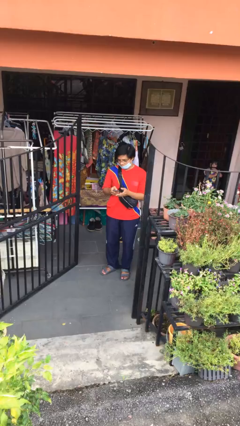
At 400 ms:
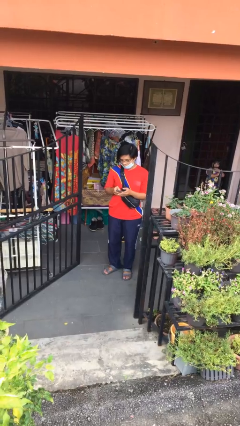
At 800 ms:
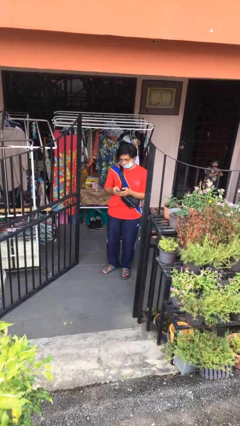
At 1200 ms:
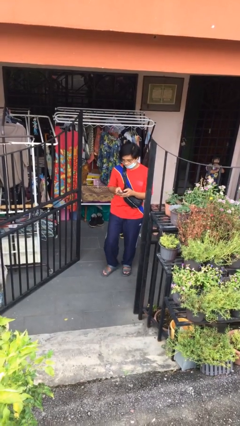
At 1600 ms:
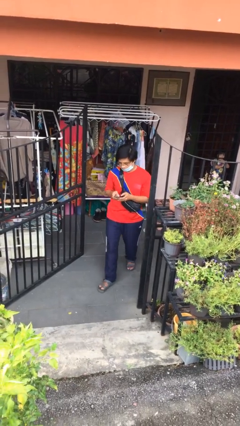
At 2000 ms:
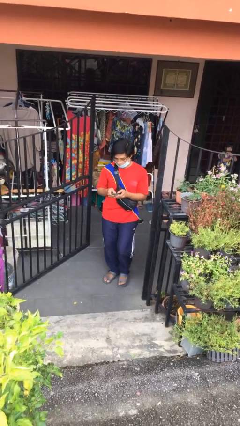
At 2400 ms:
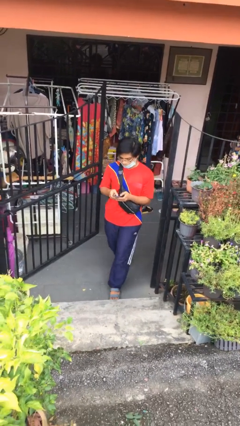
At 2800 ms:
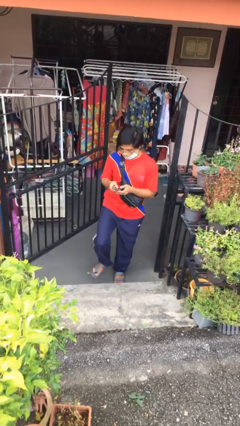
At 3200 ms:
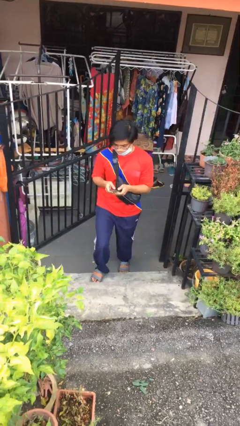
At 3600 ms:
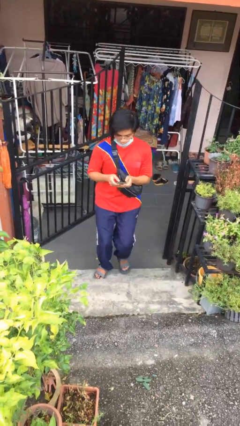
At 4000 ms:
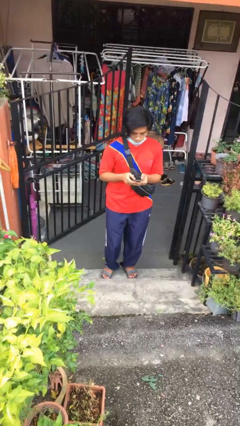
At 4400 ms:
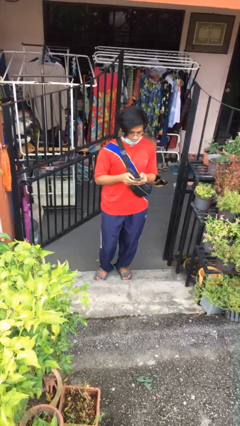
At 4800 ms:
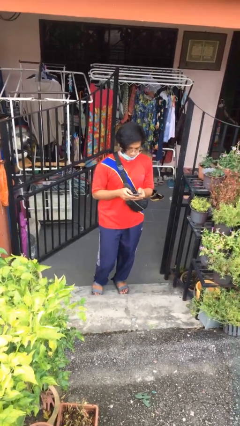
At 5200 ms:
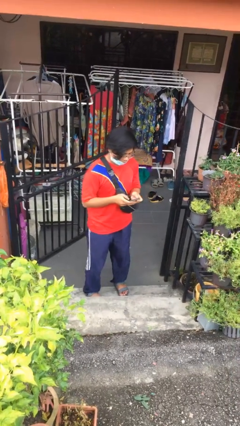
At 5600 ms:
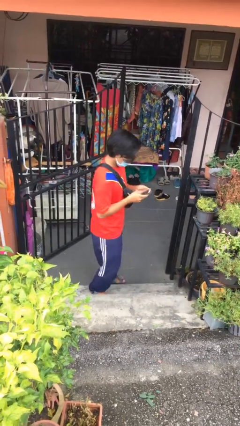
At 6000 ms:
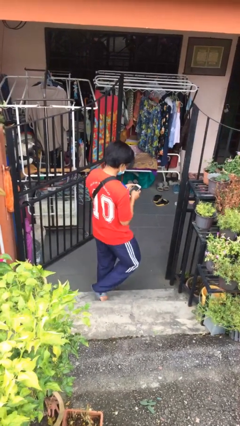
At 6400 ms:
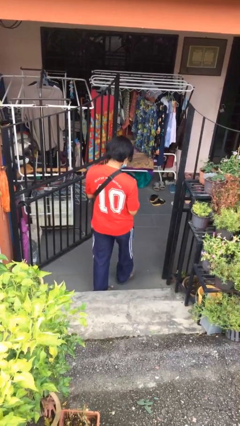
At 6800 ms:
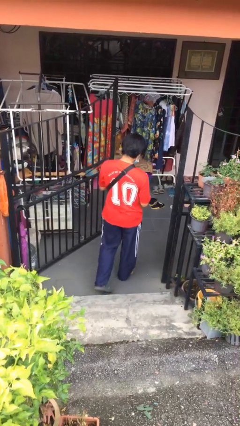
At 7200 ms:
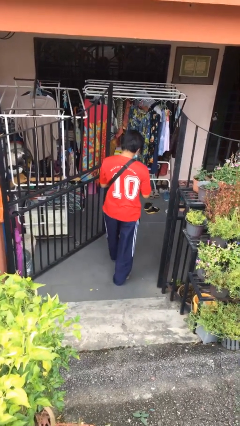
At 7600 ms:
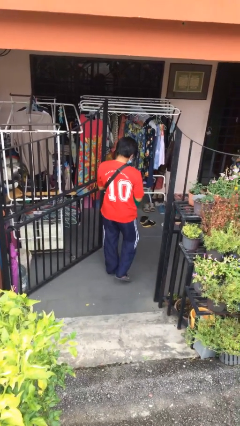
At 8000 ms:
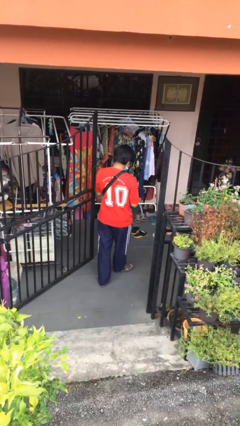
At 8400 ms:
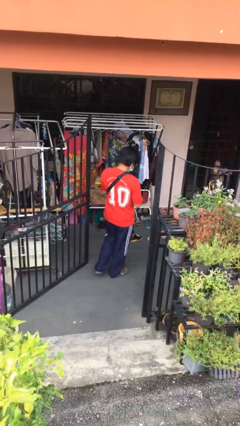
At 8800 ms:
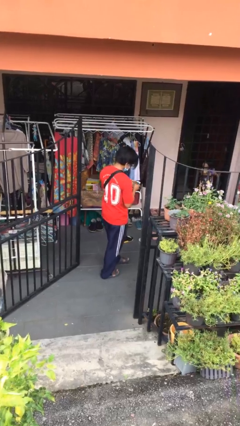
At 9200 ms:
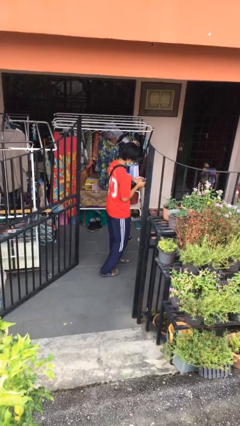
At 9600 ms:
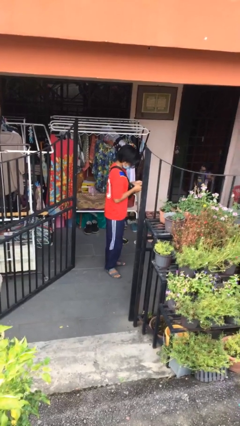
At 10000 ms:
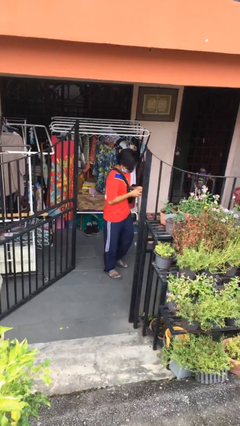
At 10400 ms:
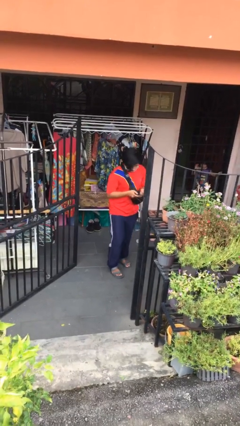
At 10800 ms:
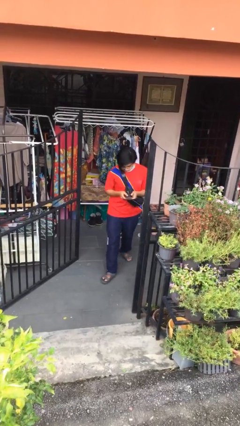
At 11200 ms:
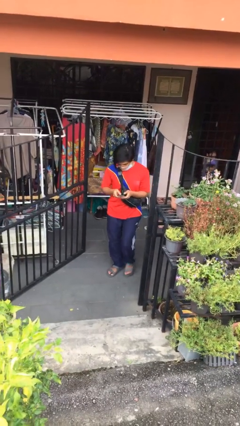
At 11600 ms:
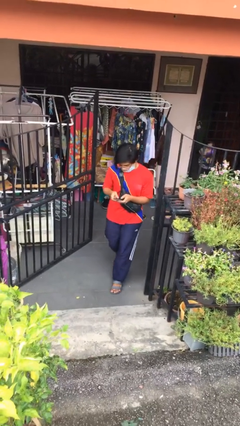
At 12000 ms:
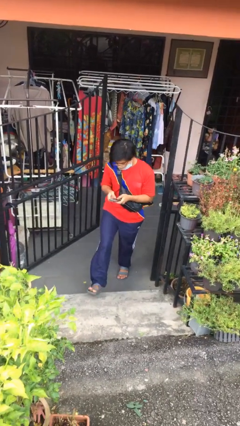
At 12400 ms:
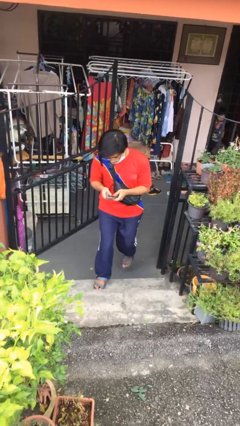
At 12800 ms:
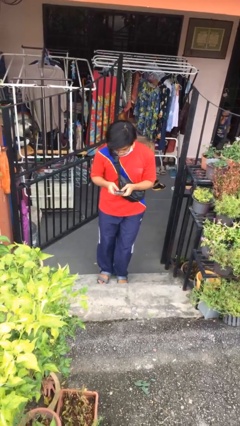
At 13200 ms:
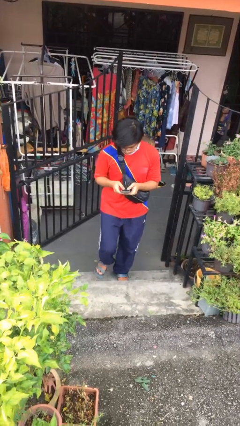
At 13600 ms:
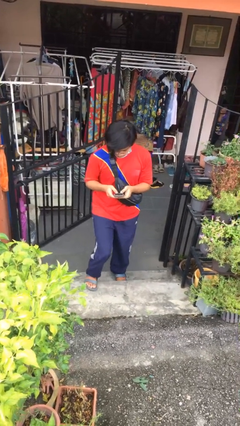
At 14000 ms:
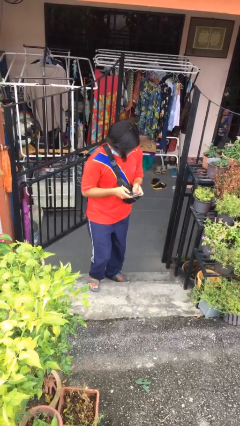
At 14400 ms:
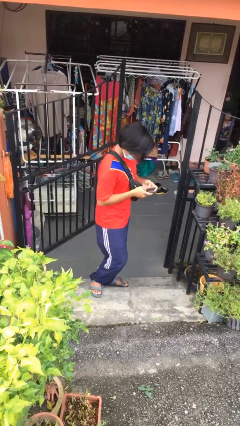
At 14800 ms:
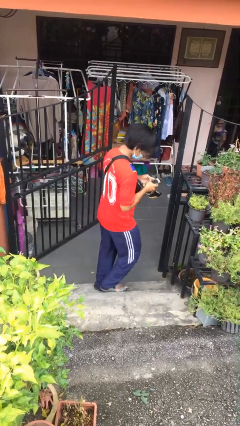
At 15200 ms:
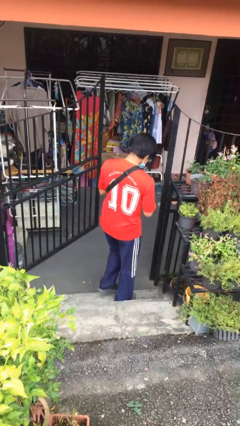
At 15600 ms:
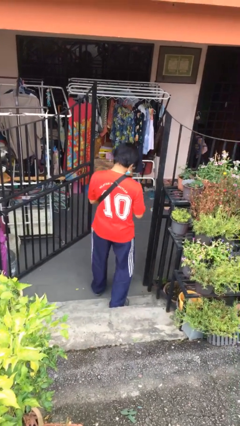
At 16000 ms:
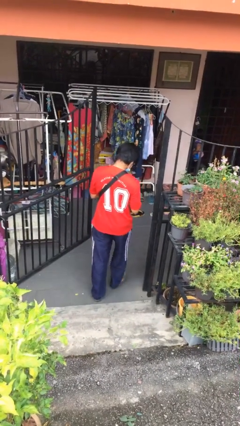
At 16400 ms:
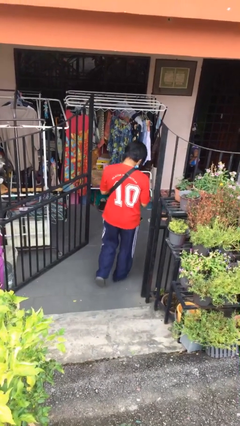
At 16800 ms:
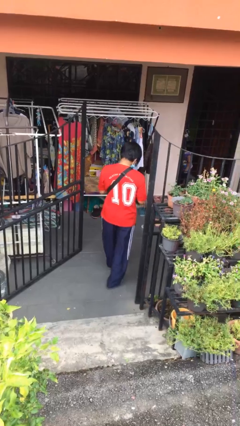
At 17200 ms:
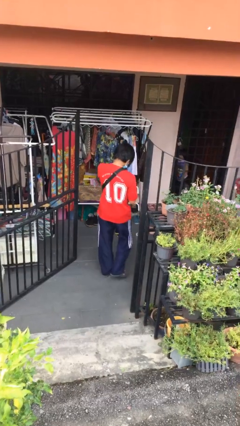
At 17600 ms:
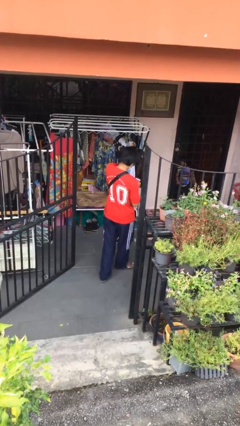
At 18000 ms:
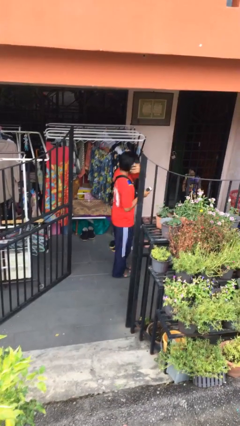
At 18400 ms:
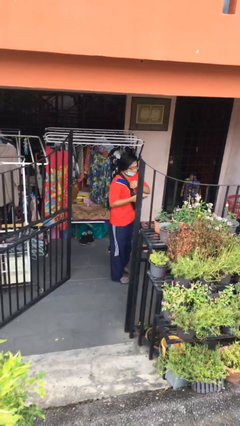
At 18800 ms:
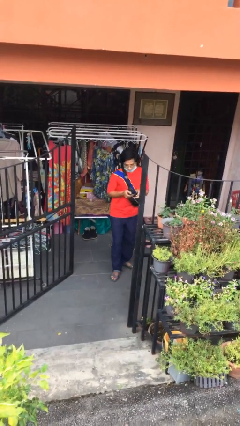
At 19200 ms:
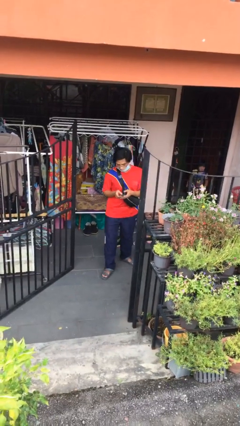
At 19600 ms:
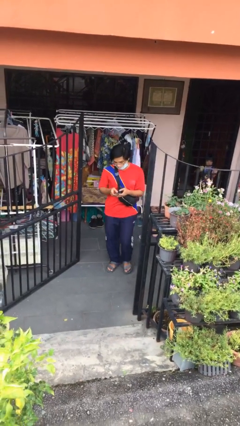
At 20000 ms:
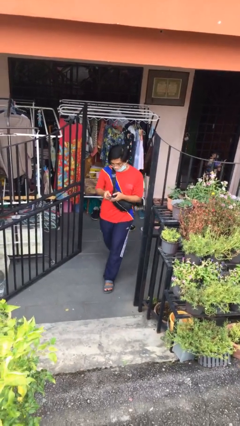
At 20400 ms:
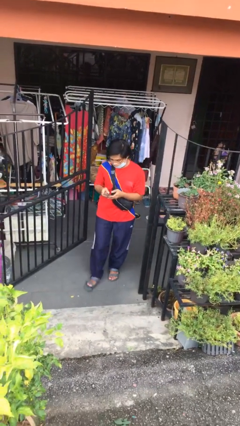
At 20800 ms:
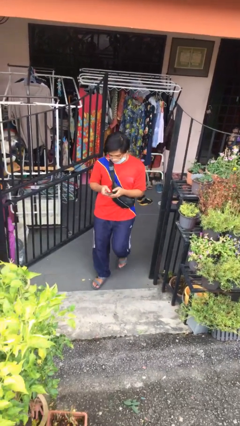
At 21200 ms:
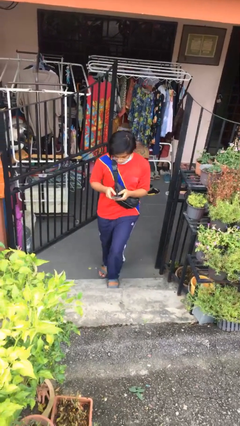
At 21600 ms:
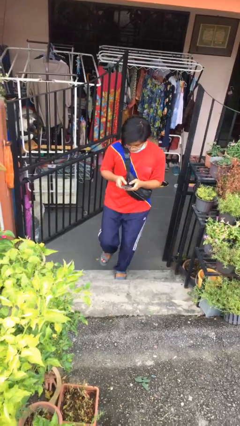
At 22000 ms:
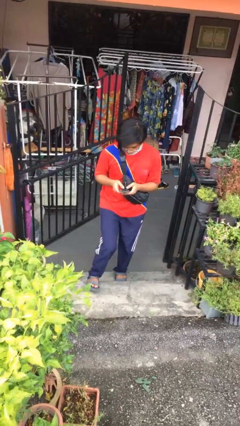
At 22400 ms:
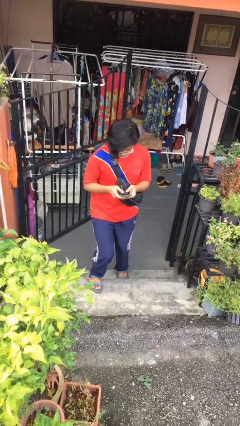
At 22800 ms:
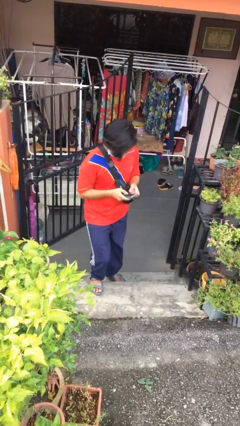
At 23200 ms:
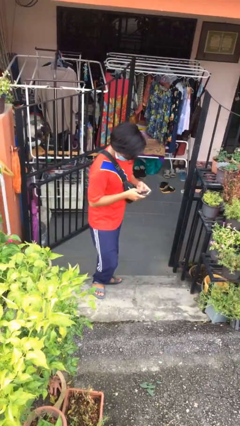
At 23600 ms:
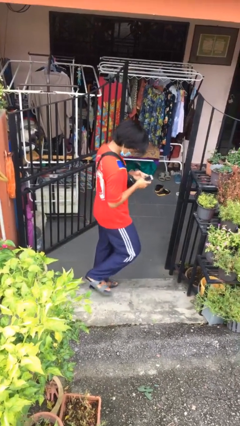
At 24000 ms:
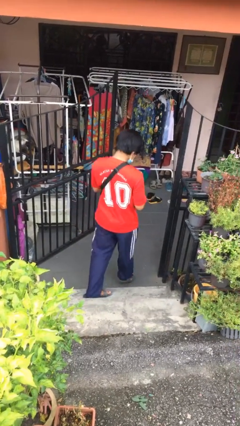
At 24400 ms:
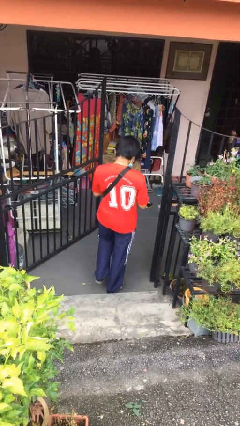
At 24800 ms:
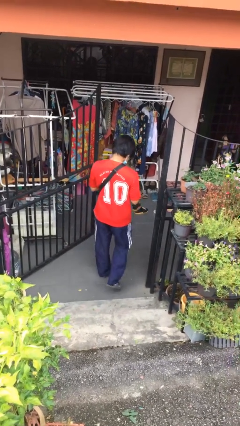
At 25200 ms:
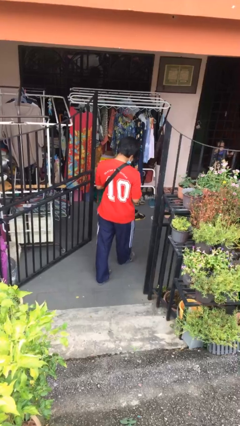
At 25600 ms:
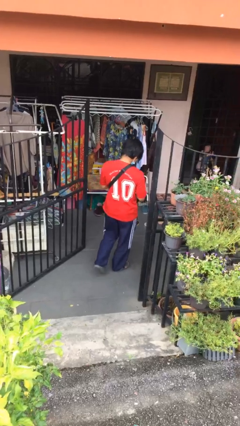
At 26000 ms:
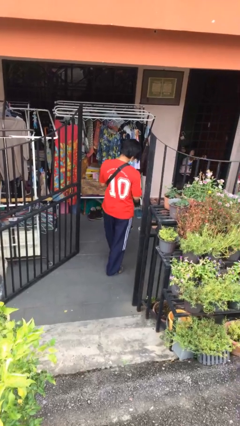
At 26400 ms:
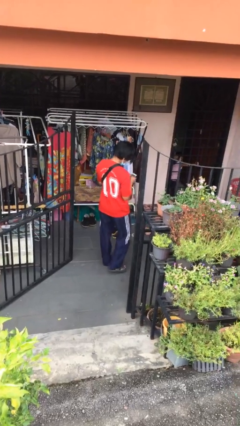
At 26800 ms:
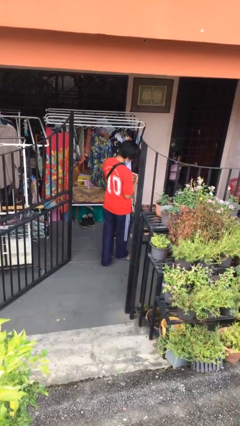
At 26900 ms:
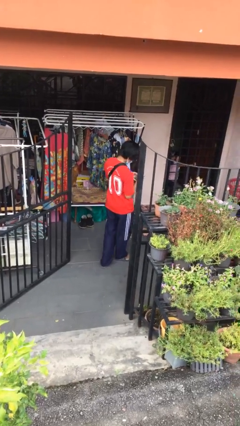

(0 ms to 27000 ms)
person texts on phone

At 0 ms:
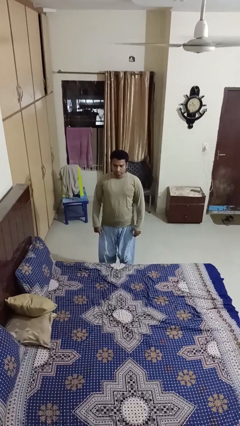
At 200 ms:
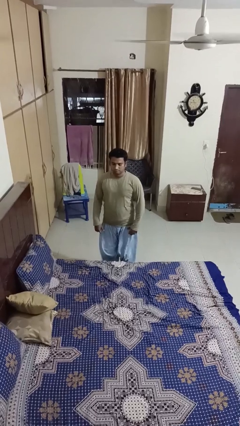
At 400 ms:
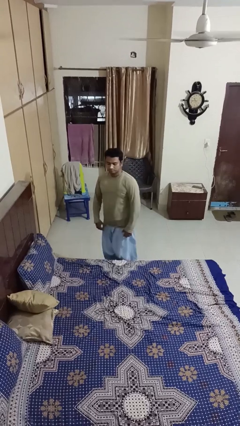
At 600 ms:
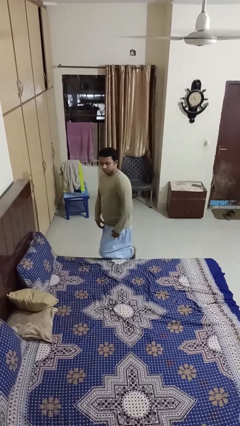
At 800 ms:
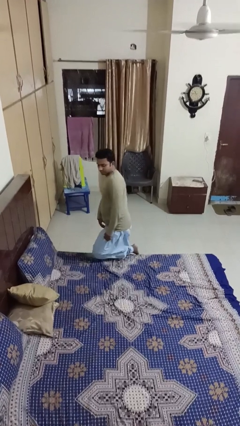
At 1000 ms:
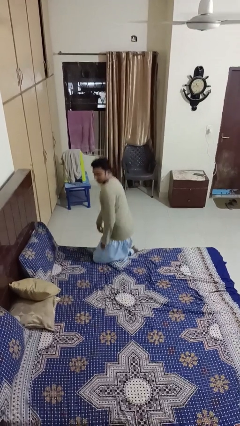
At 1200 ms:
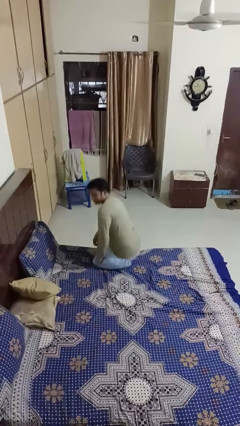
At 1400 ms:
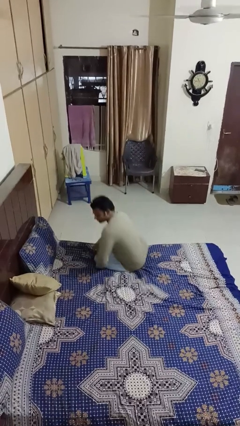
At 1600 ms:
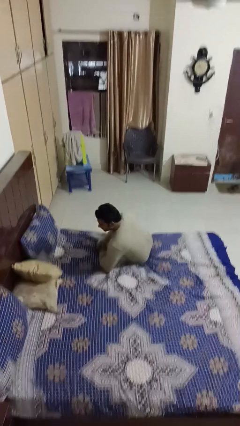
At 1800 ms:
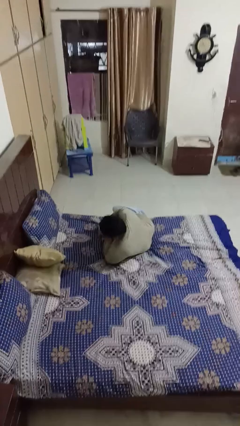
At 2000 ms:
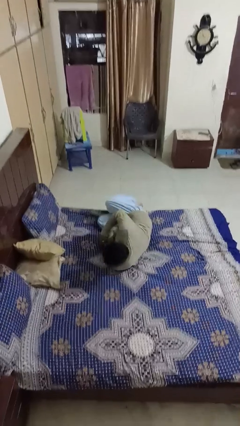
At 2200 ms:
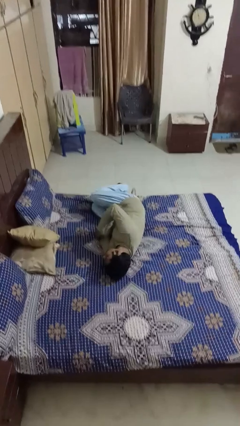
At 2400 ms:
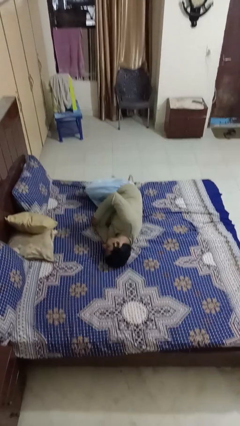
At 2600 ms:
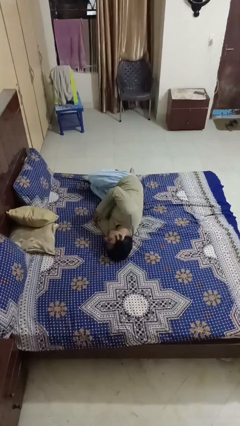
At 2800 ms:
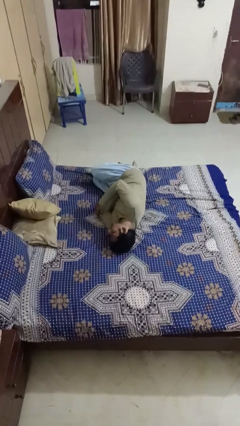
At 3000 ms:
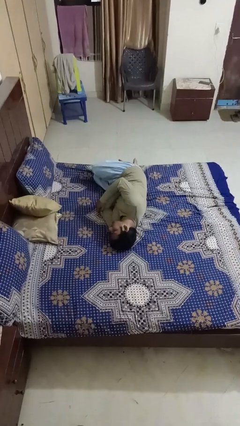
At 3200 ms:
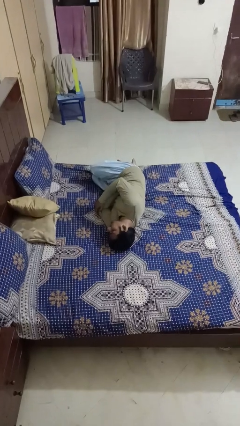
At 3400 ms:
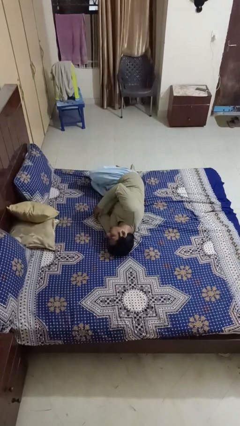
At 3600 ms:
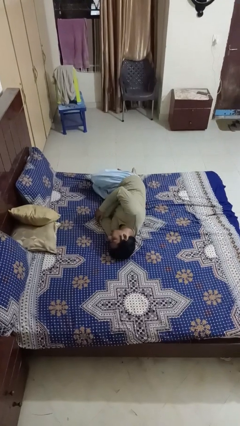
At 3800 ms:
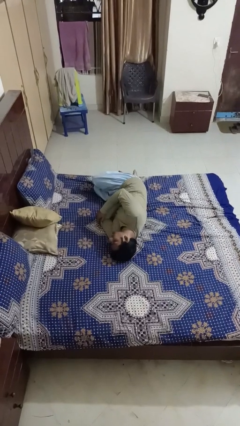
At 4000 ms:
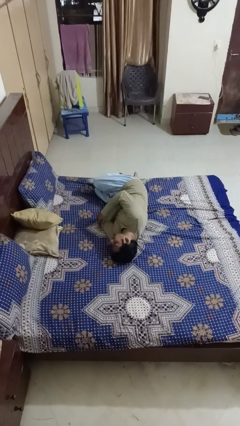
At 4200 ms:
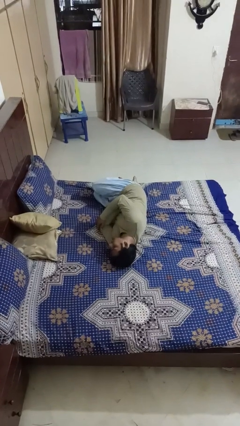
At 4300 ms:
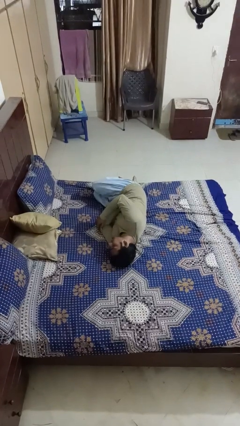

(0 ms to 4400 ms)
person lies down on bed

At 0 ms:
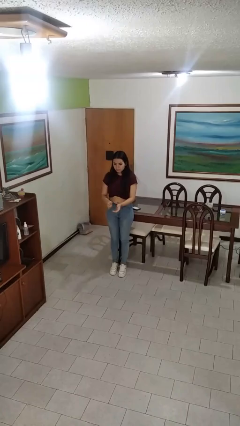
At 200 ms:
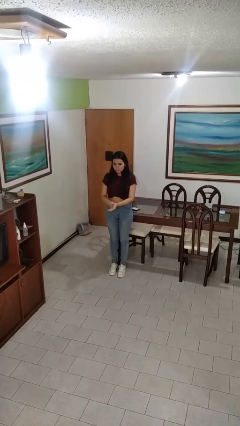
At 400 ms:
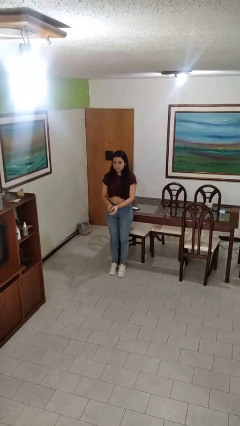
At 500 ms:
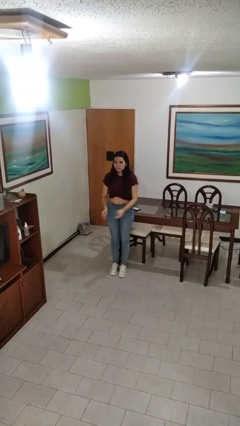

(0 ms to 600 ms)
person claps hands
